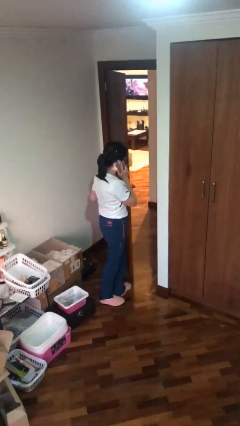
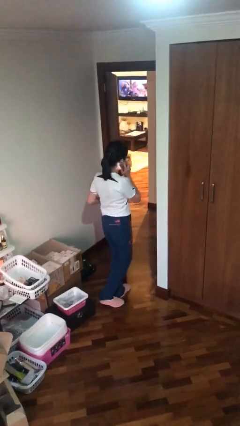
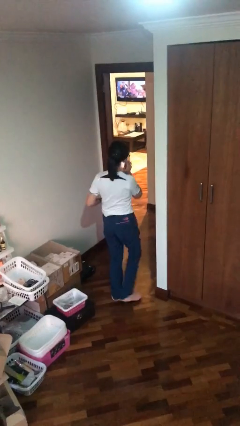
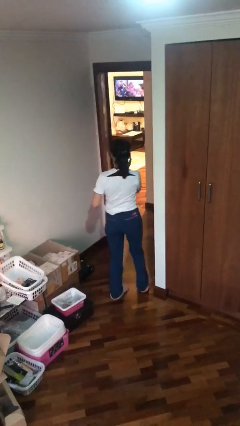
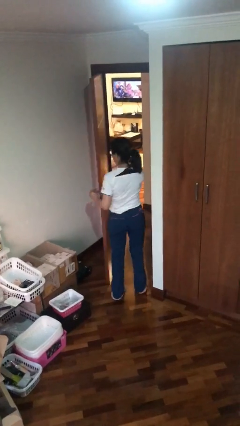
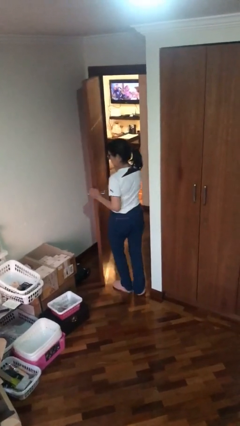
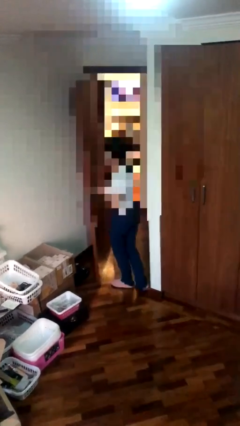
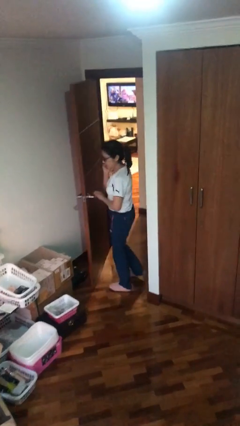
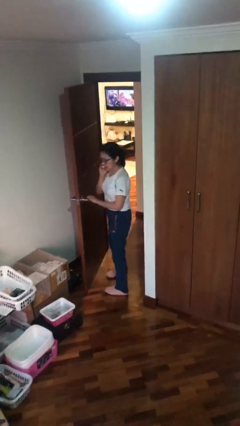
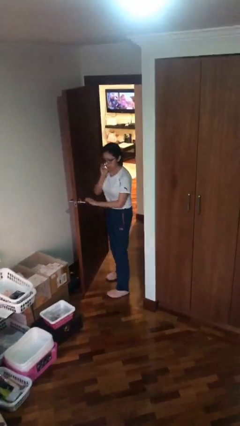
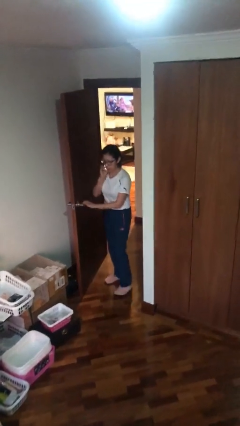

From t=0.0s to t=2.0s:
person exits scene through structure

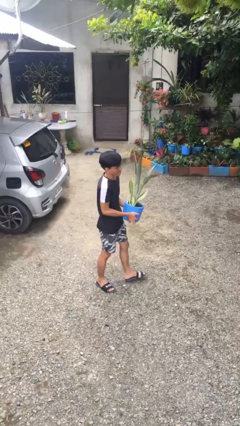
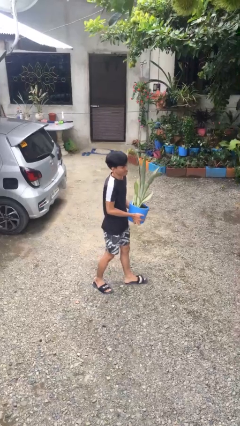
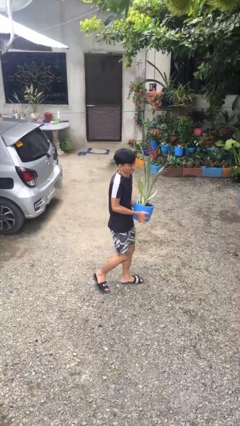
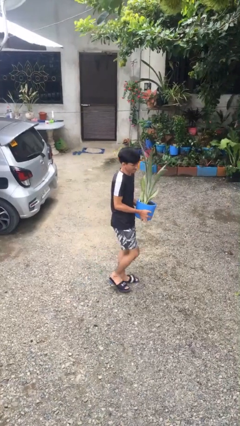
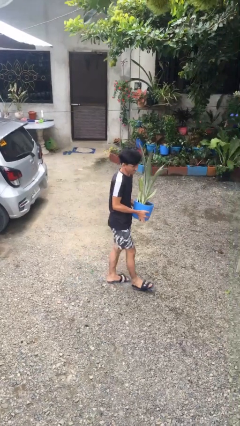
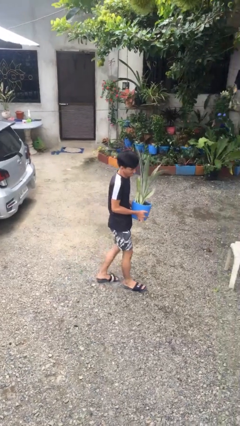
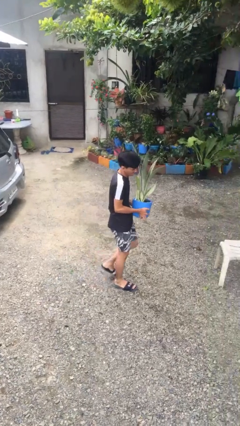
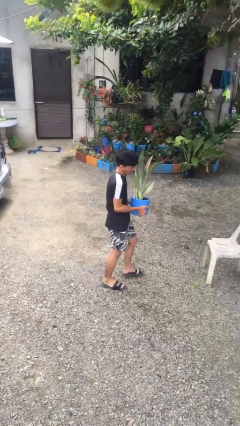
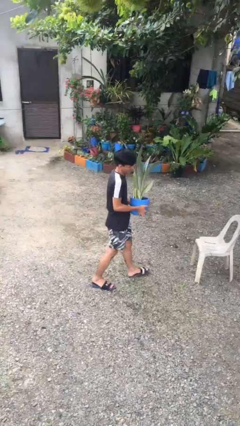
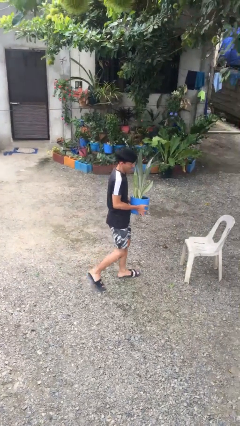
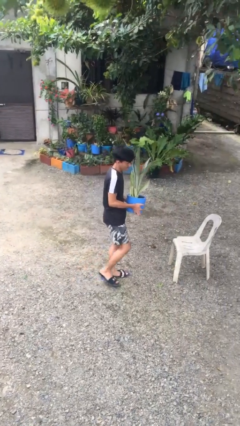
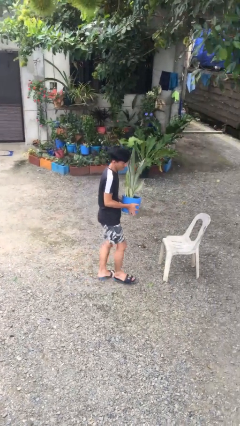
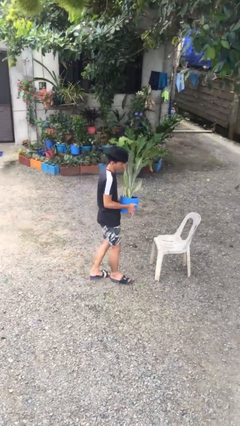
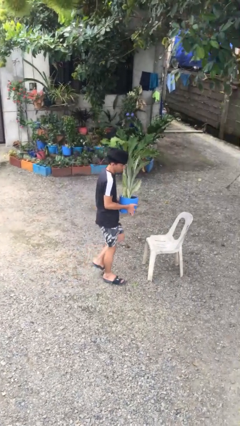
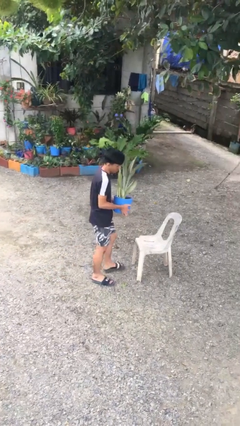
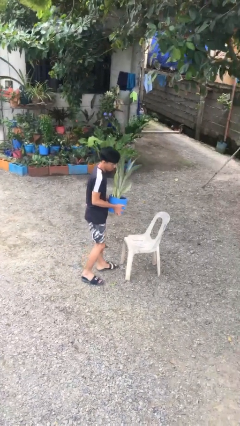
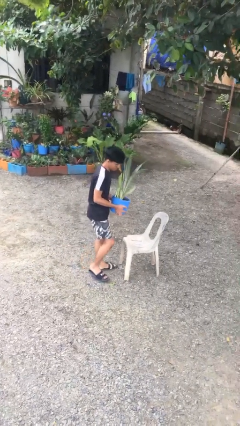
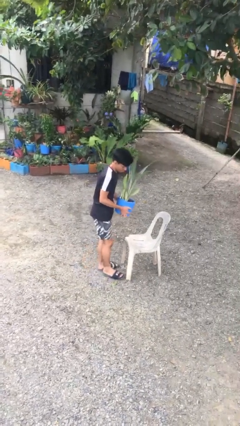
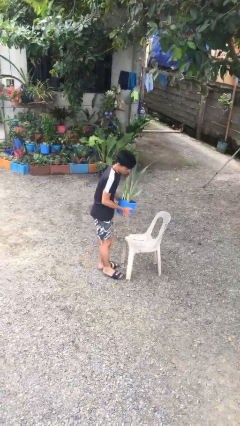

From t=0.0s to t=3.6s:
person carries heavy object

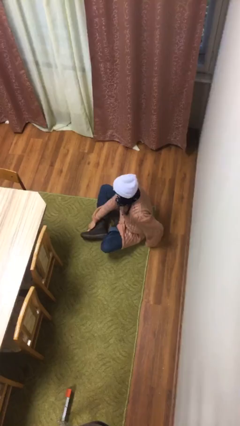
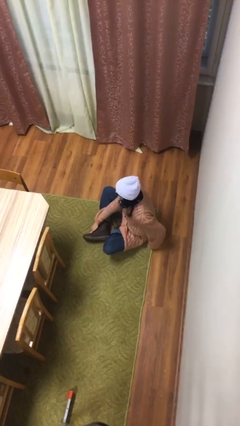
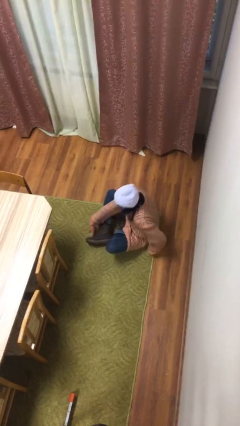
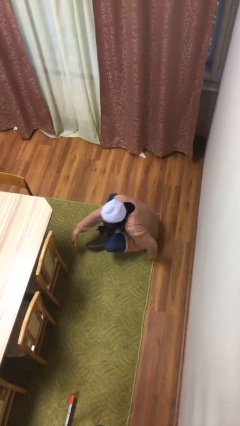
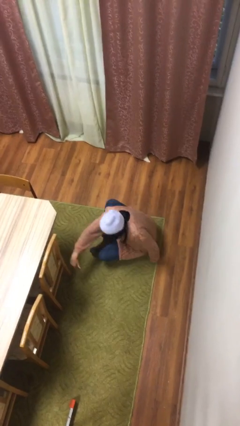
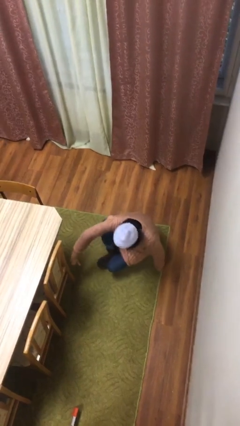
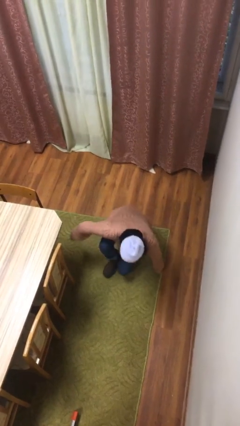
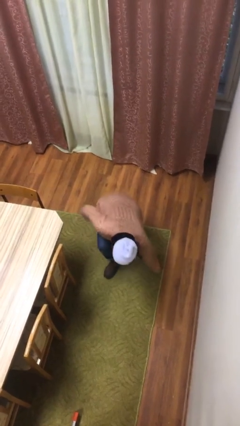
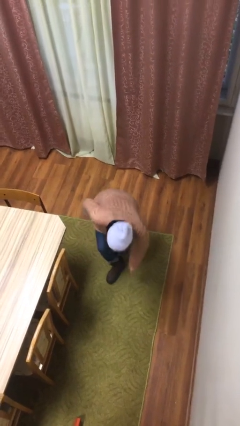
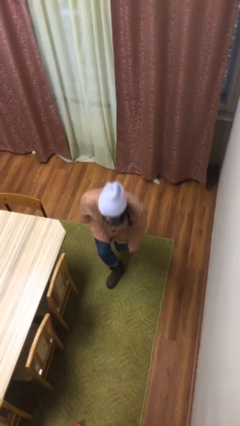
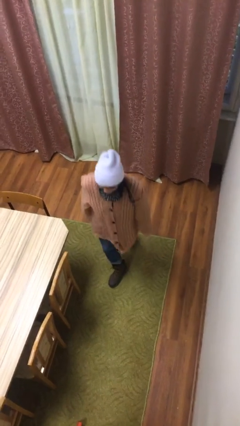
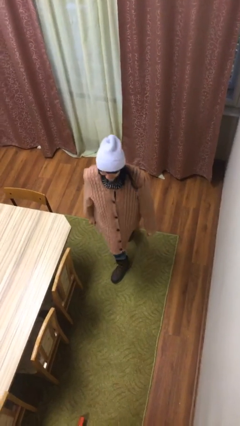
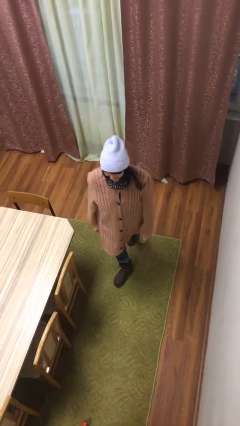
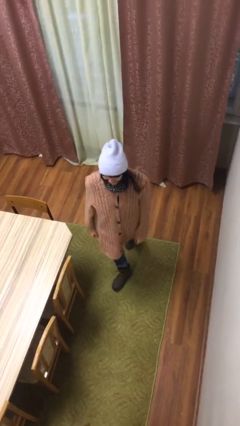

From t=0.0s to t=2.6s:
person stands up

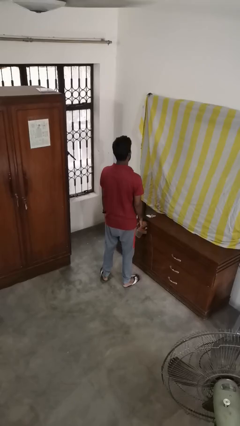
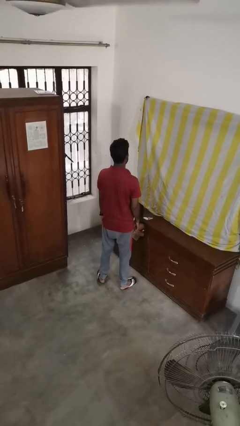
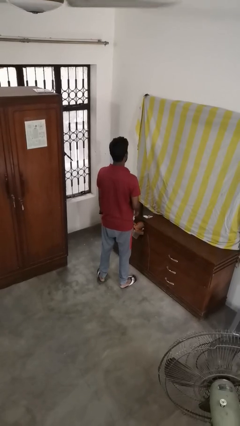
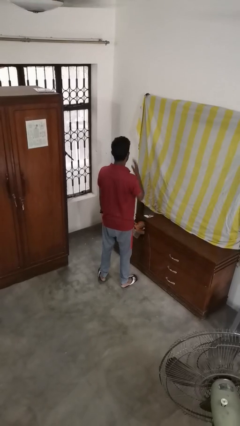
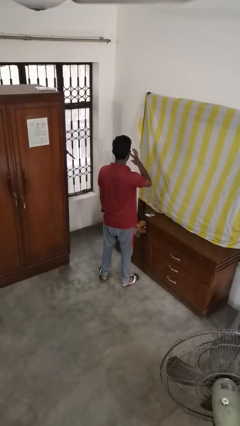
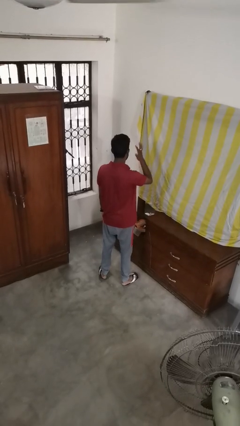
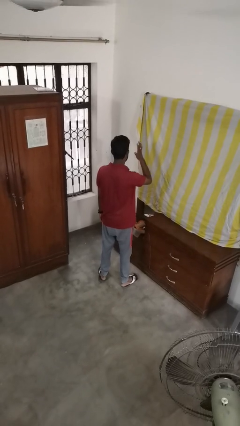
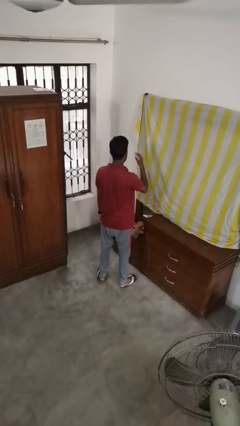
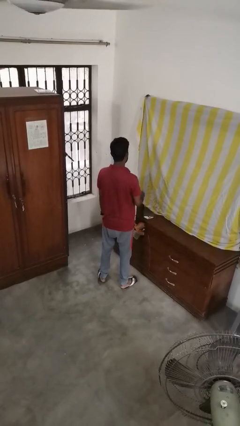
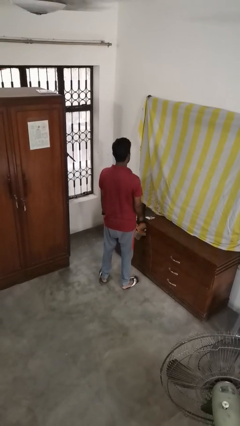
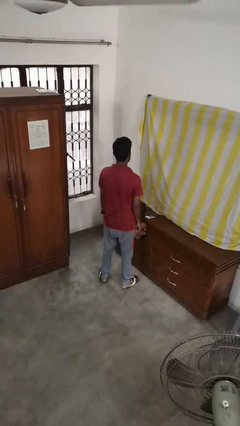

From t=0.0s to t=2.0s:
person puts fingers in ear

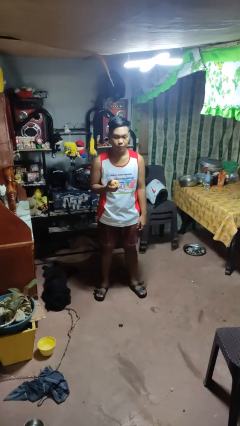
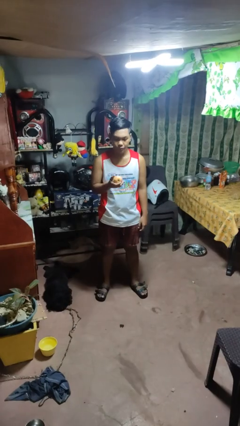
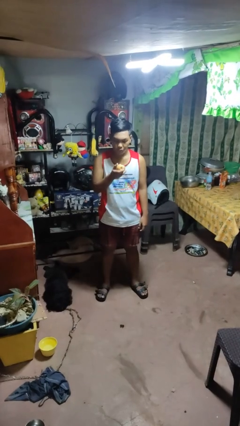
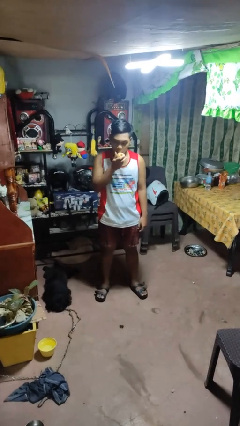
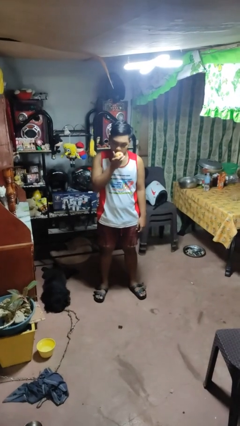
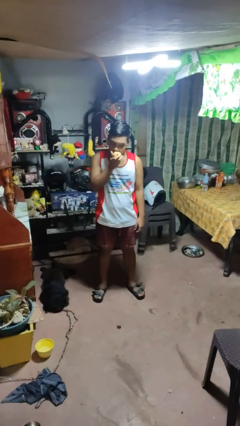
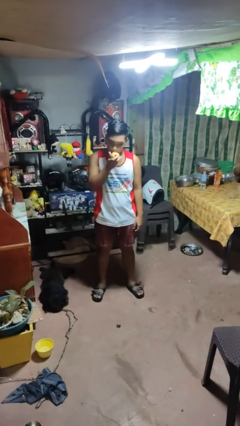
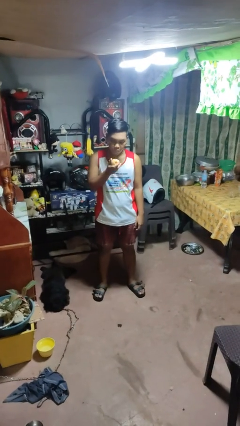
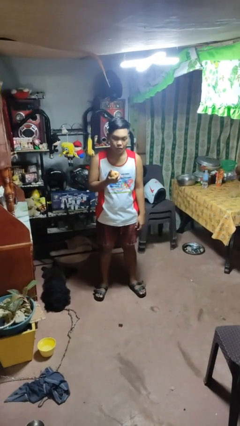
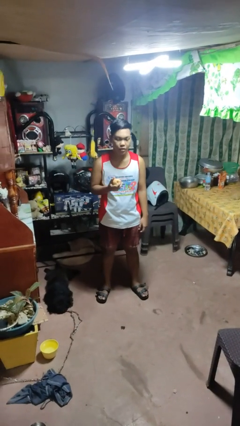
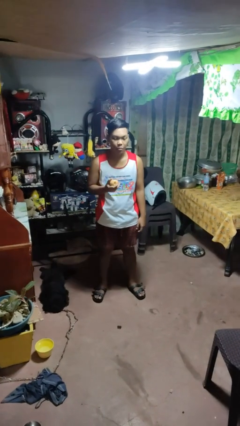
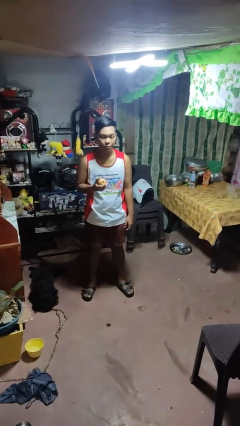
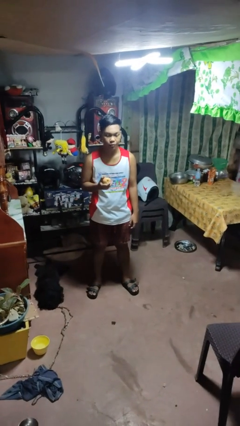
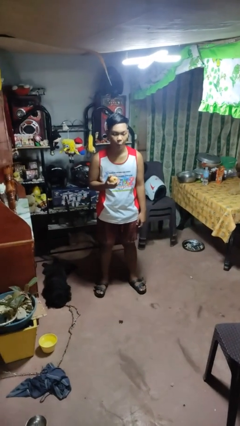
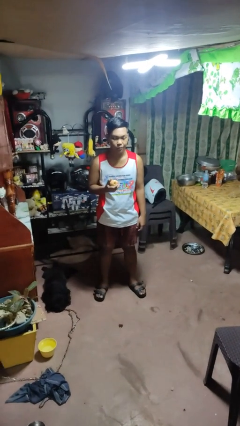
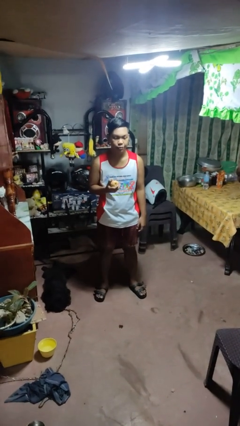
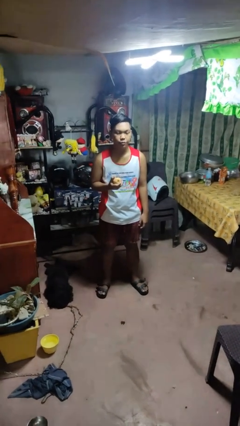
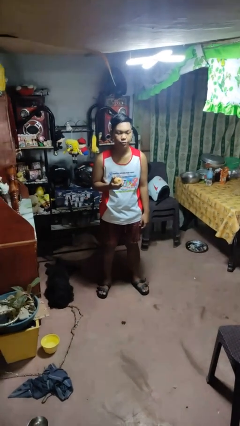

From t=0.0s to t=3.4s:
person eats apple

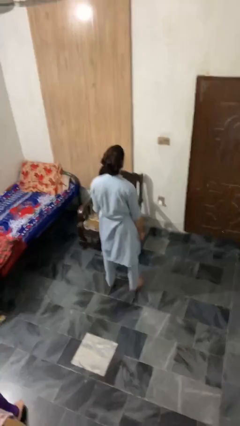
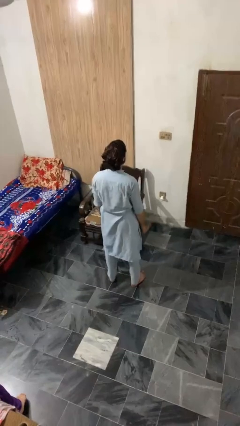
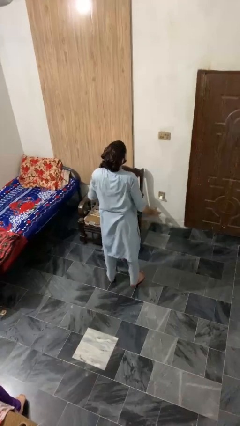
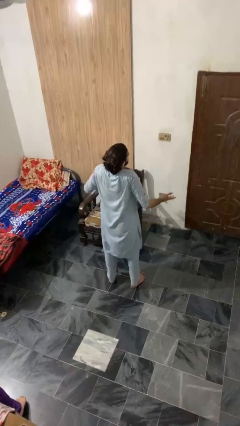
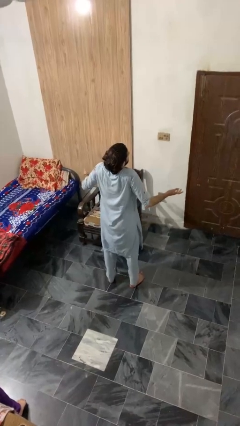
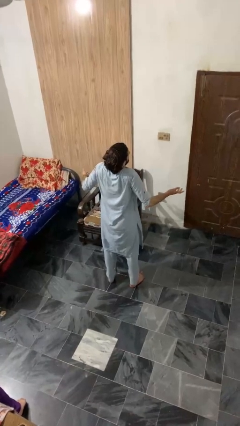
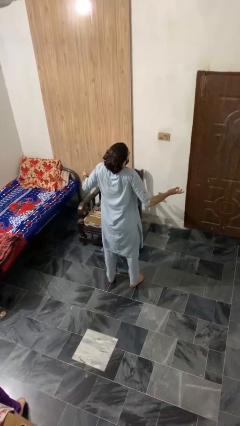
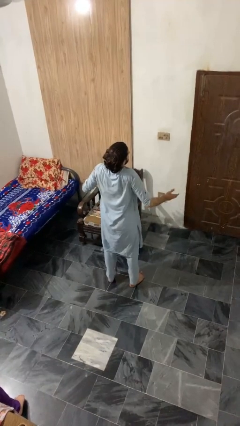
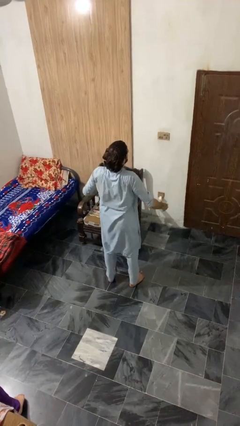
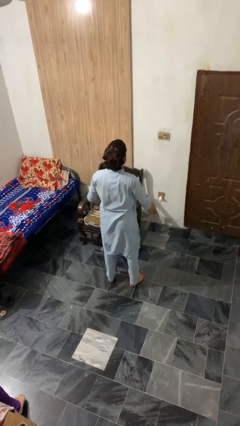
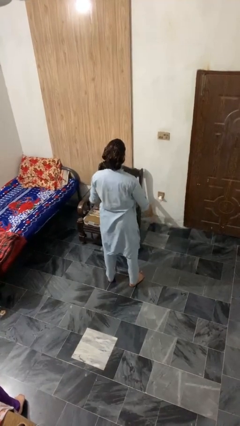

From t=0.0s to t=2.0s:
person shrugs

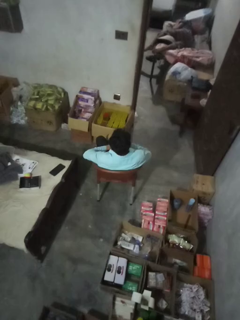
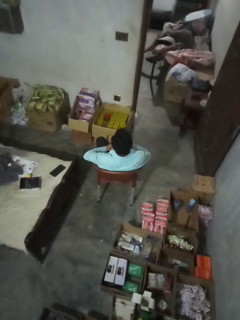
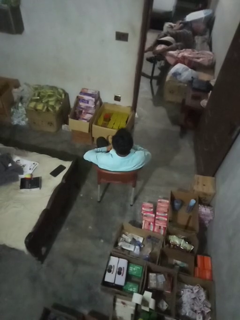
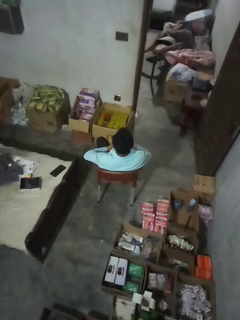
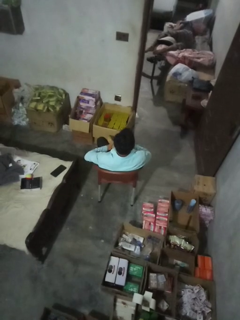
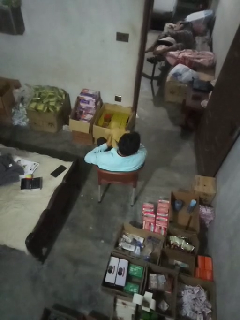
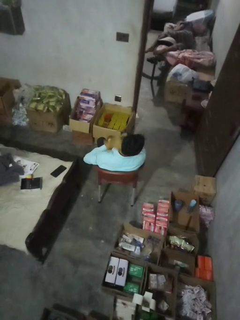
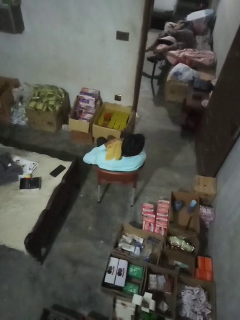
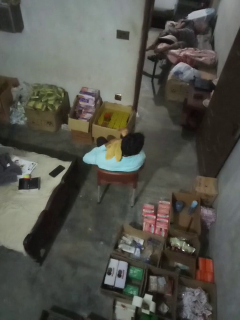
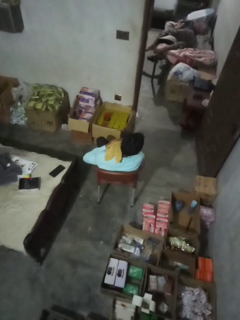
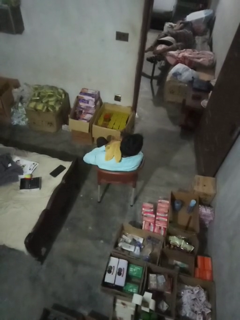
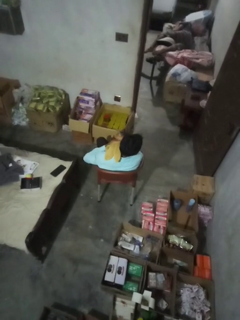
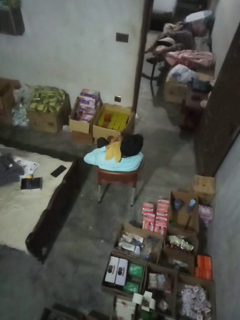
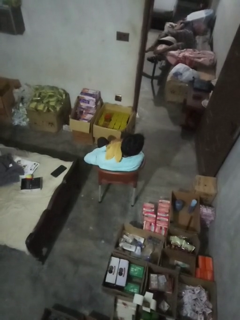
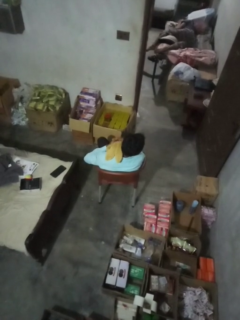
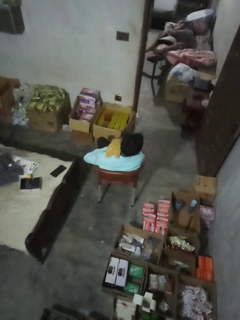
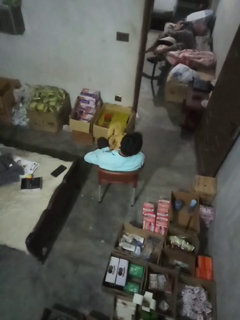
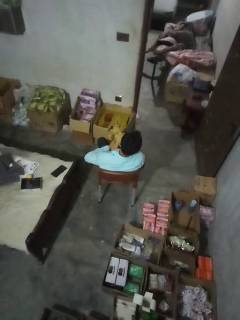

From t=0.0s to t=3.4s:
person hugs stuffed animal
